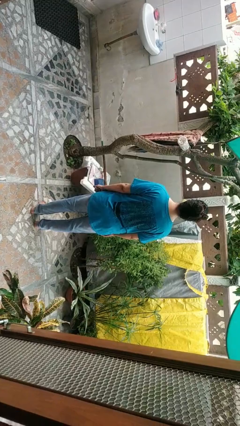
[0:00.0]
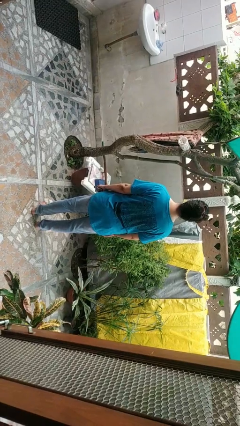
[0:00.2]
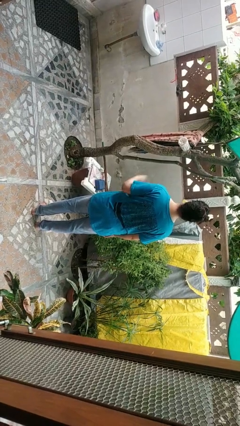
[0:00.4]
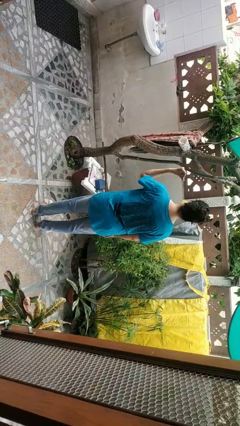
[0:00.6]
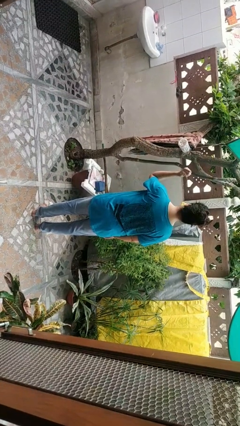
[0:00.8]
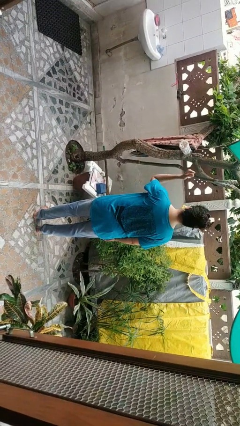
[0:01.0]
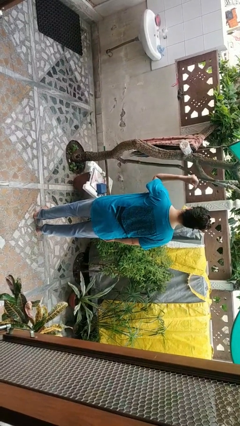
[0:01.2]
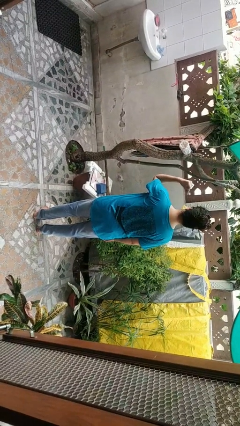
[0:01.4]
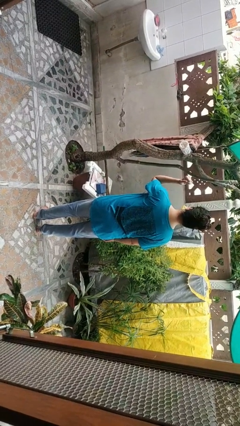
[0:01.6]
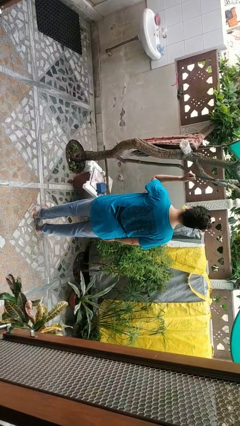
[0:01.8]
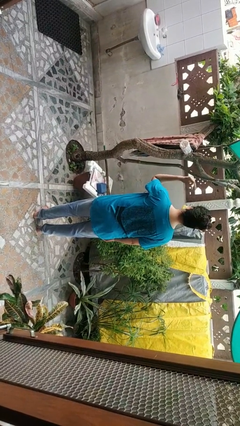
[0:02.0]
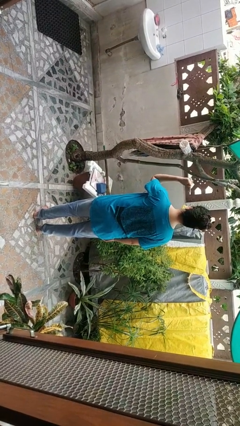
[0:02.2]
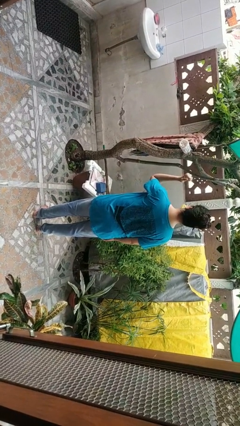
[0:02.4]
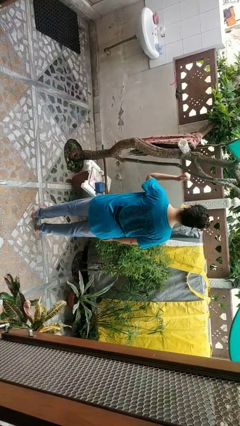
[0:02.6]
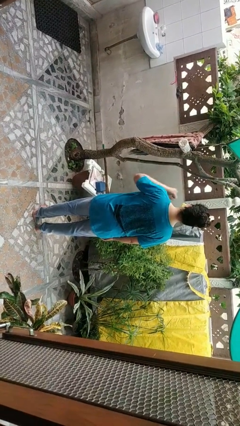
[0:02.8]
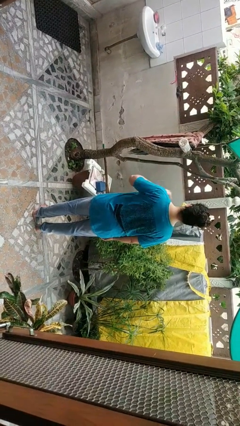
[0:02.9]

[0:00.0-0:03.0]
person snaps fingers

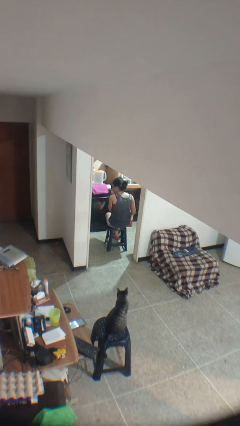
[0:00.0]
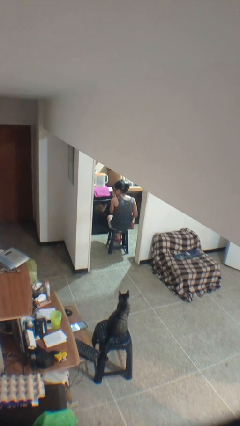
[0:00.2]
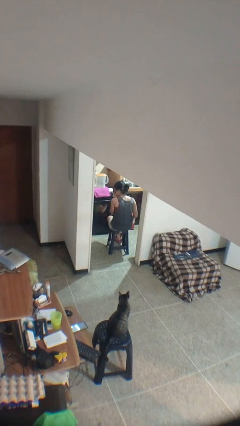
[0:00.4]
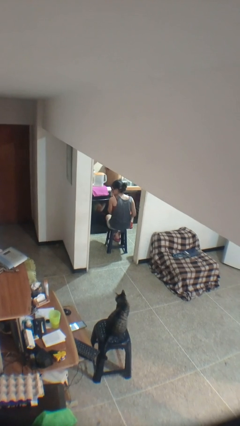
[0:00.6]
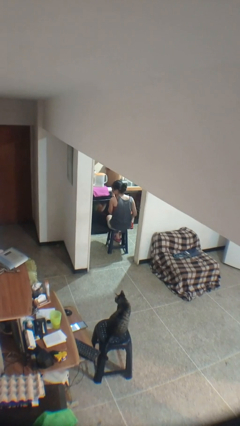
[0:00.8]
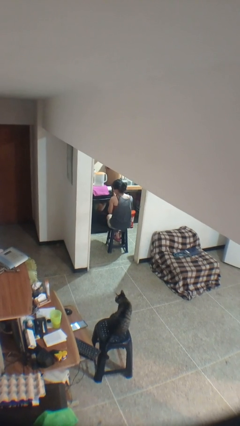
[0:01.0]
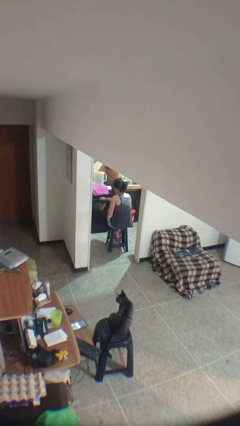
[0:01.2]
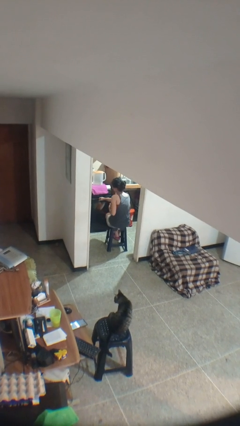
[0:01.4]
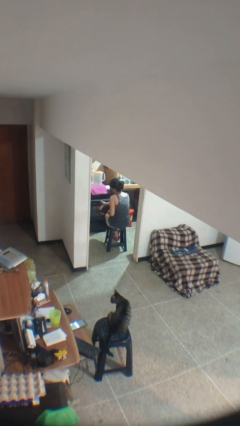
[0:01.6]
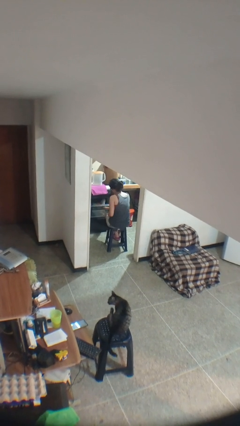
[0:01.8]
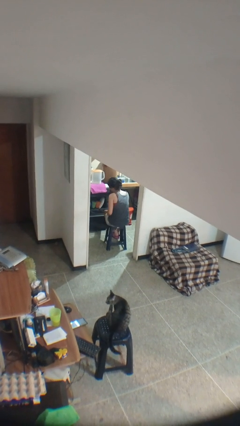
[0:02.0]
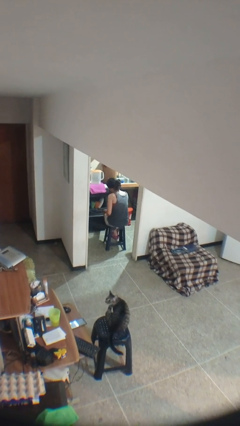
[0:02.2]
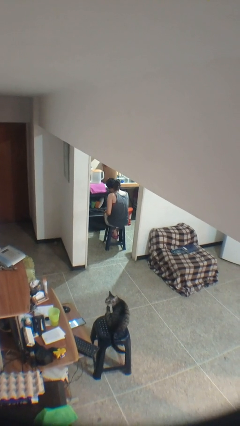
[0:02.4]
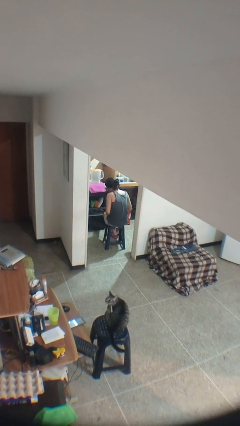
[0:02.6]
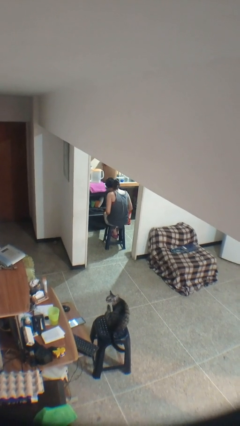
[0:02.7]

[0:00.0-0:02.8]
person opens dishwasher

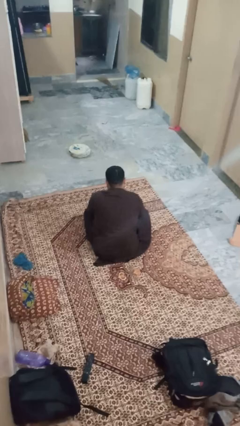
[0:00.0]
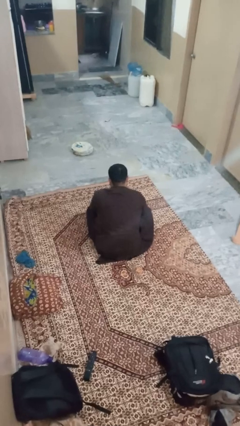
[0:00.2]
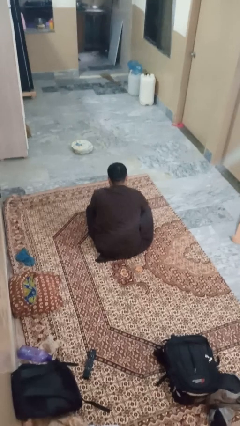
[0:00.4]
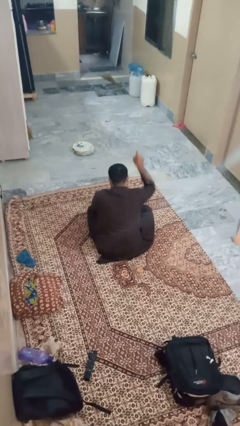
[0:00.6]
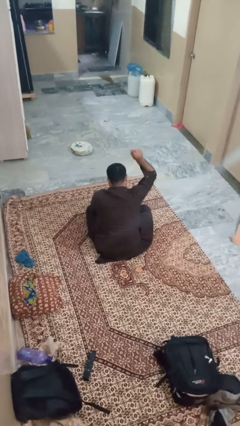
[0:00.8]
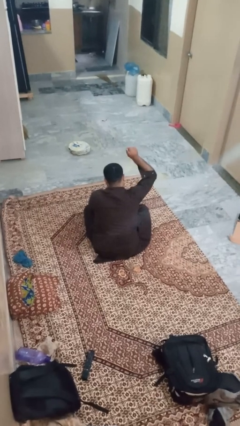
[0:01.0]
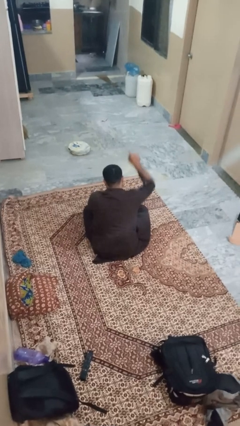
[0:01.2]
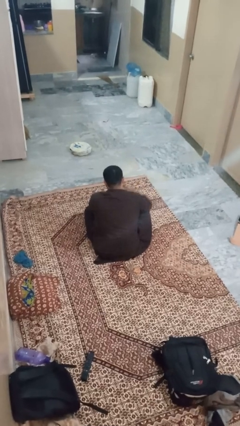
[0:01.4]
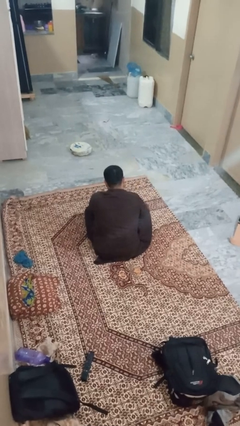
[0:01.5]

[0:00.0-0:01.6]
person gestures number one

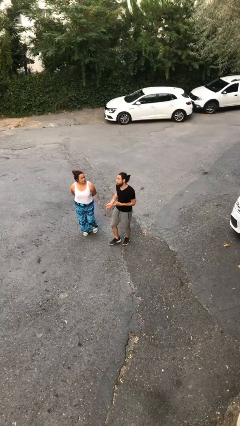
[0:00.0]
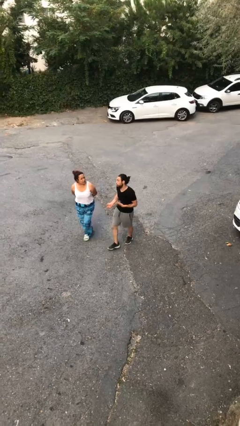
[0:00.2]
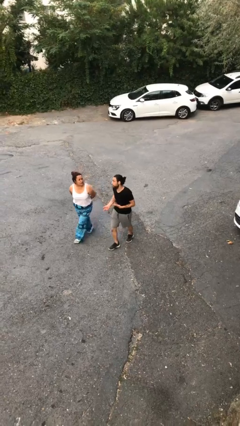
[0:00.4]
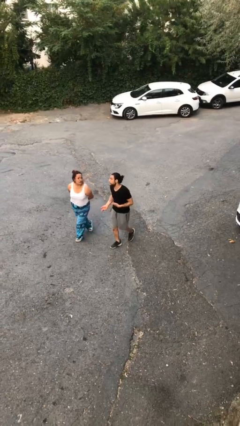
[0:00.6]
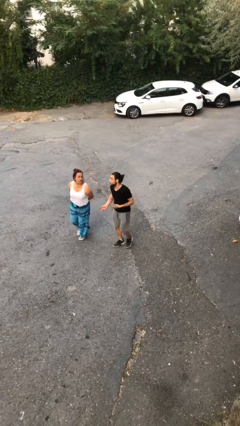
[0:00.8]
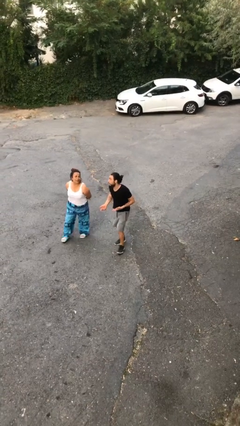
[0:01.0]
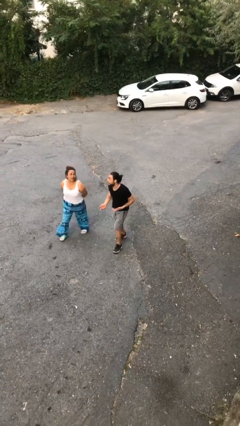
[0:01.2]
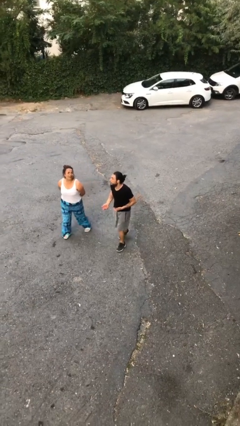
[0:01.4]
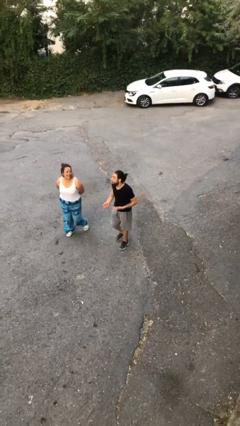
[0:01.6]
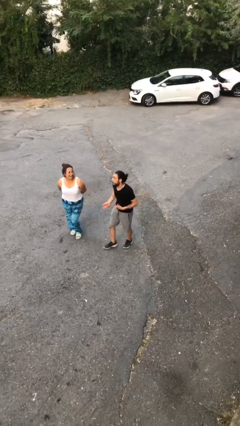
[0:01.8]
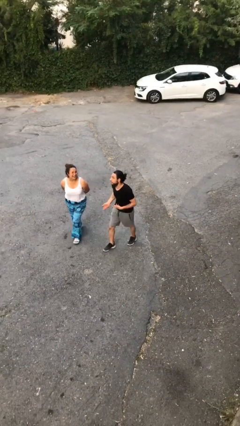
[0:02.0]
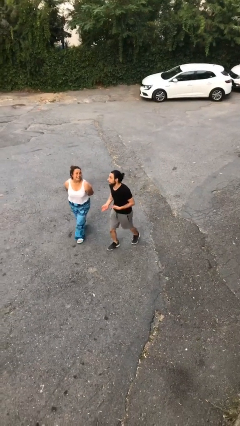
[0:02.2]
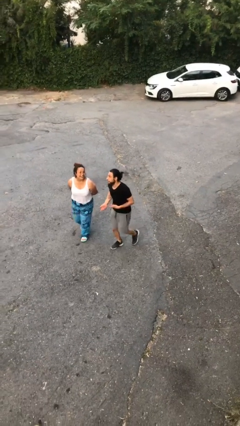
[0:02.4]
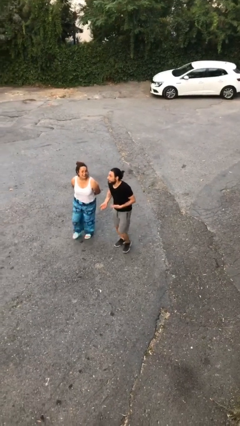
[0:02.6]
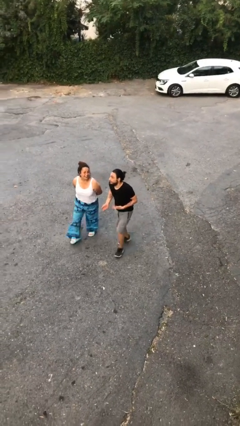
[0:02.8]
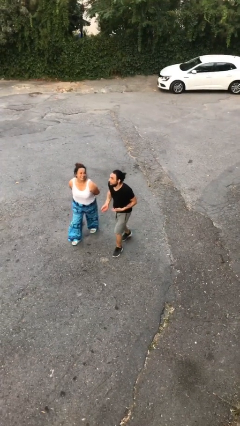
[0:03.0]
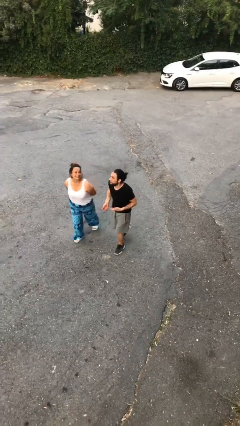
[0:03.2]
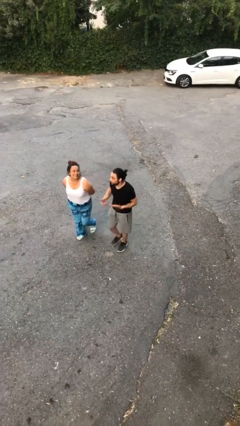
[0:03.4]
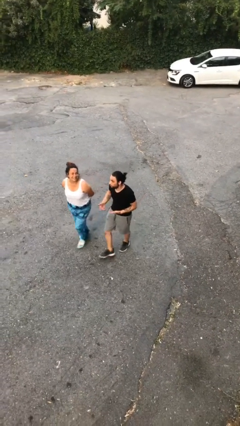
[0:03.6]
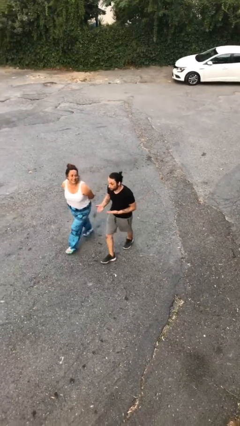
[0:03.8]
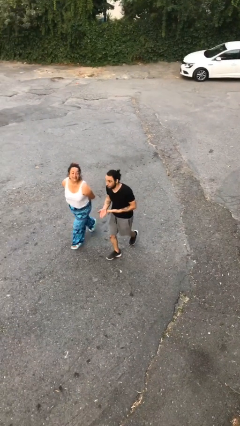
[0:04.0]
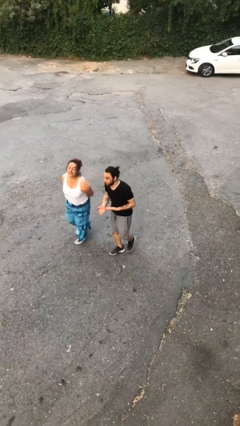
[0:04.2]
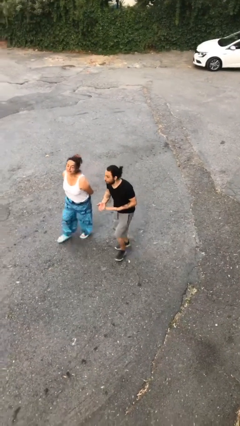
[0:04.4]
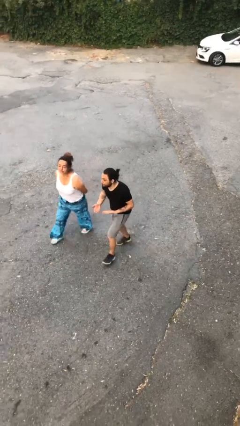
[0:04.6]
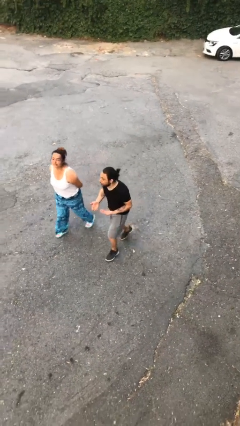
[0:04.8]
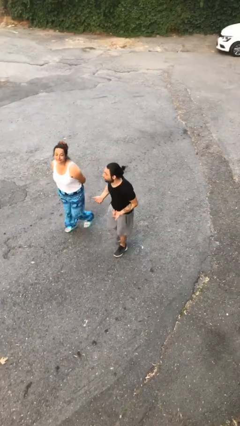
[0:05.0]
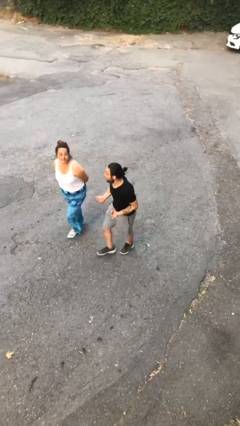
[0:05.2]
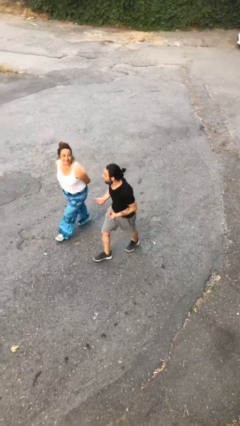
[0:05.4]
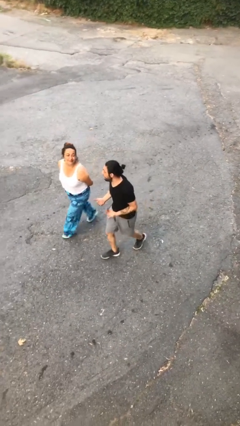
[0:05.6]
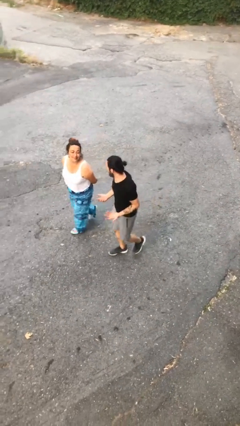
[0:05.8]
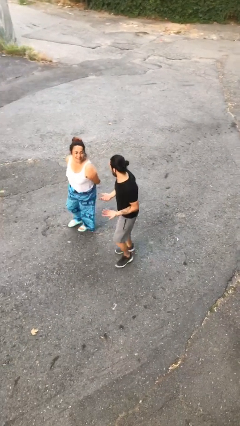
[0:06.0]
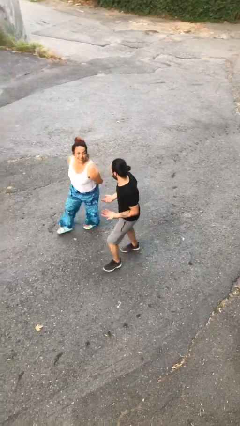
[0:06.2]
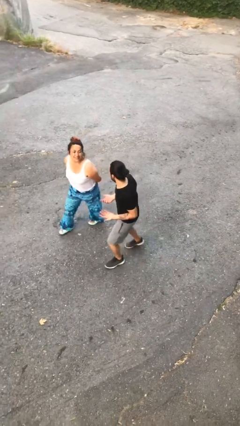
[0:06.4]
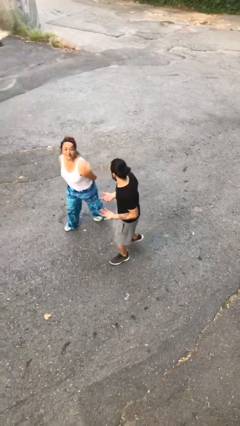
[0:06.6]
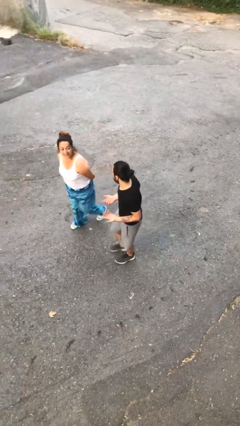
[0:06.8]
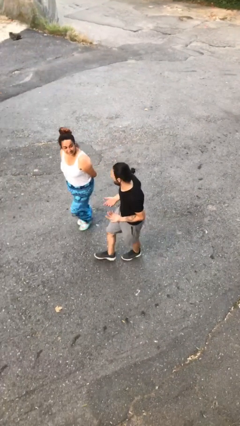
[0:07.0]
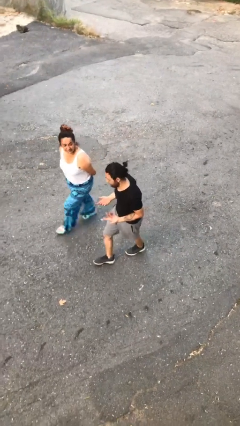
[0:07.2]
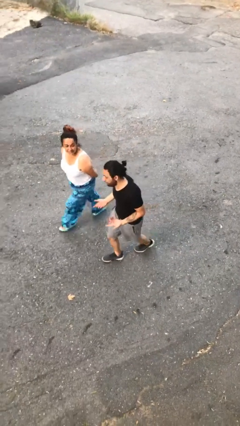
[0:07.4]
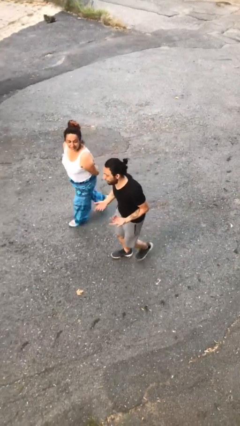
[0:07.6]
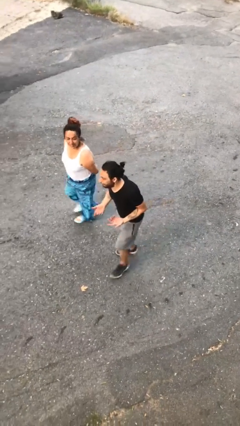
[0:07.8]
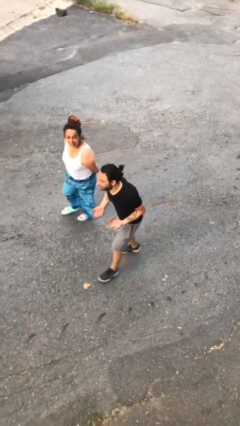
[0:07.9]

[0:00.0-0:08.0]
person talks to person

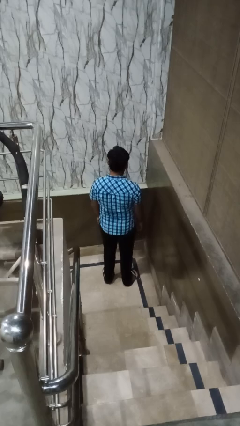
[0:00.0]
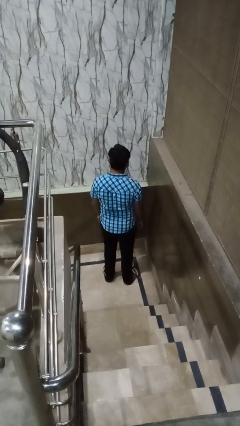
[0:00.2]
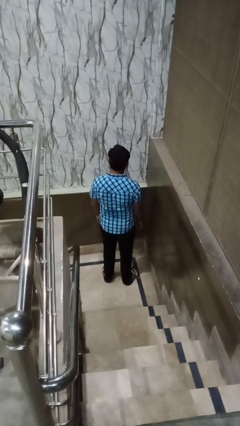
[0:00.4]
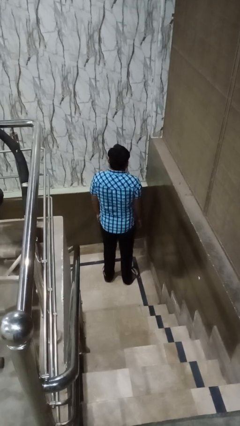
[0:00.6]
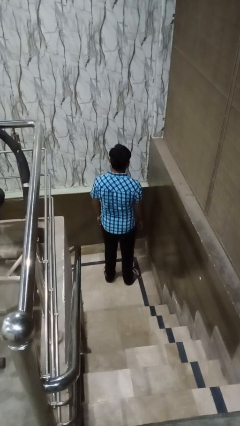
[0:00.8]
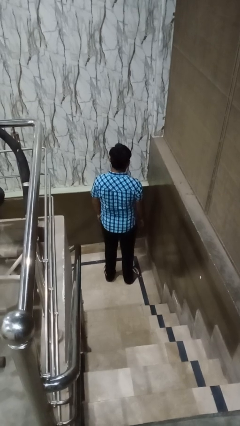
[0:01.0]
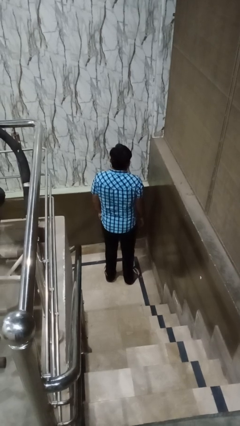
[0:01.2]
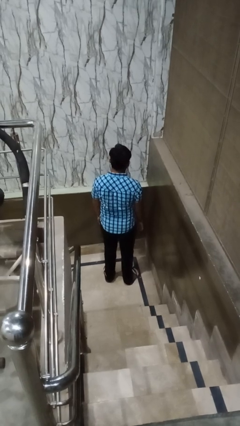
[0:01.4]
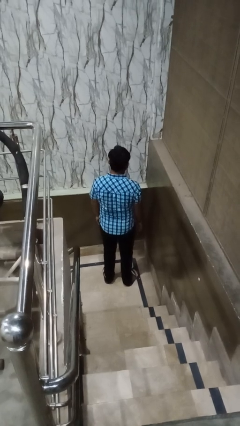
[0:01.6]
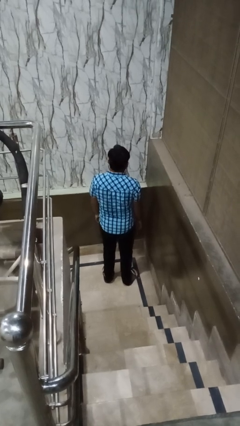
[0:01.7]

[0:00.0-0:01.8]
person shrugs

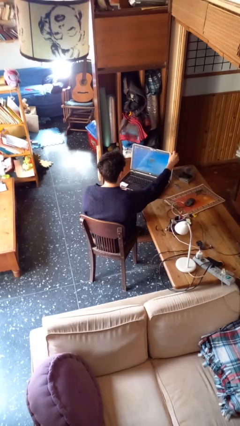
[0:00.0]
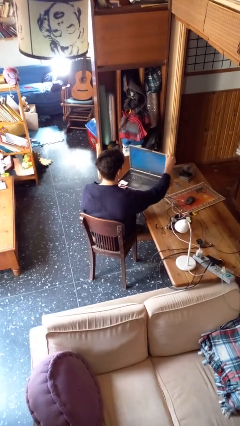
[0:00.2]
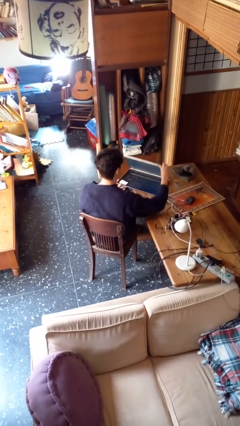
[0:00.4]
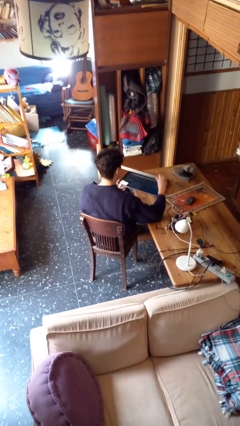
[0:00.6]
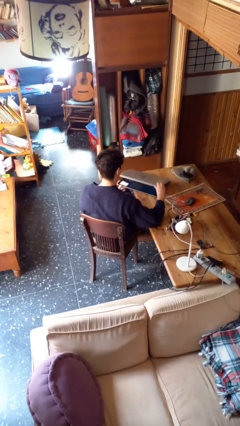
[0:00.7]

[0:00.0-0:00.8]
person closes laptop
